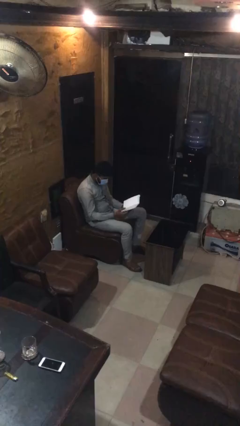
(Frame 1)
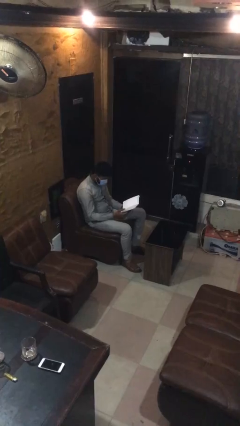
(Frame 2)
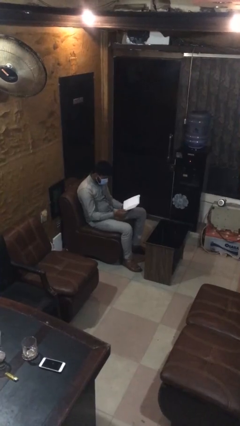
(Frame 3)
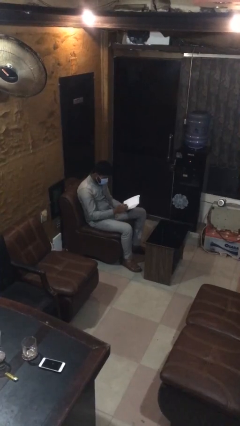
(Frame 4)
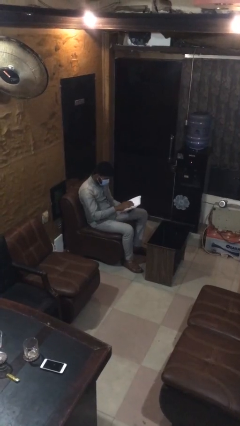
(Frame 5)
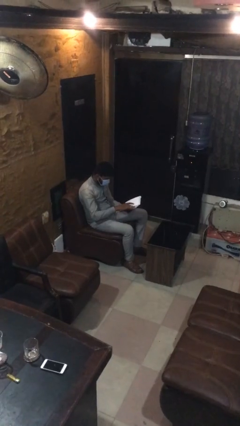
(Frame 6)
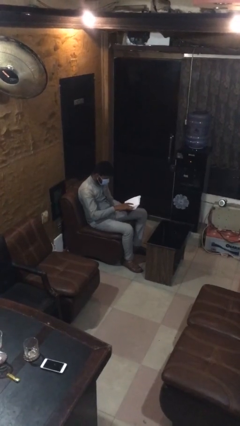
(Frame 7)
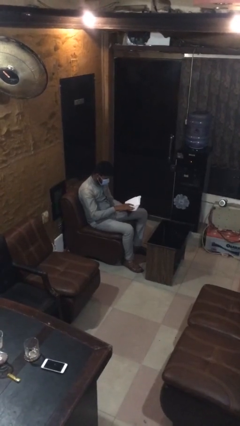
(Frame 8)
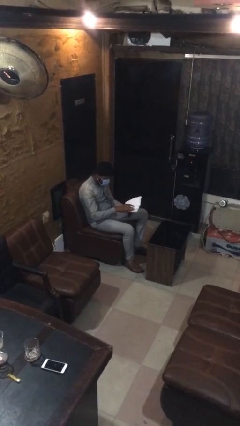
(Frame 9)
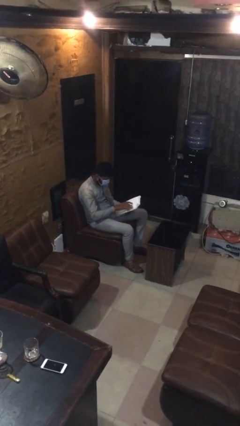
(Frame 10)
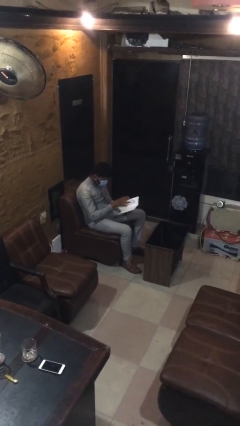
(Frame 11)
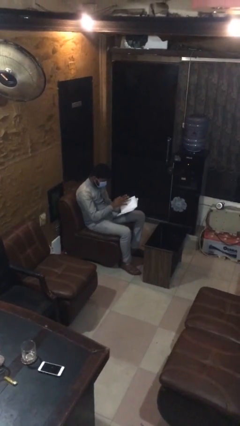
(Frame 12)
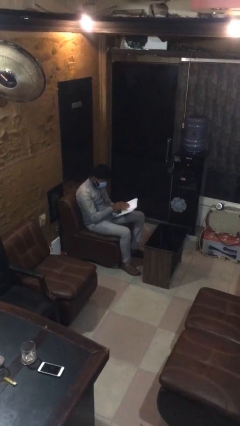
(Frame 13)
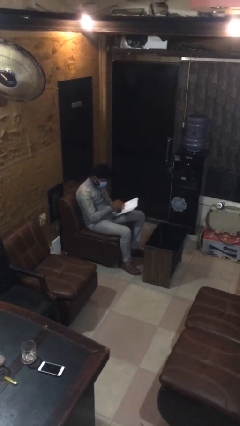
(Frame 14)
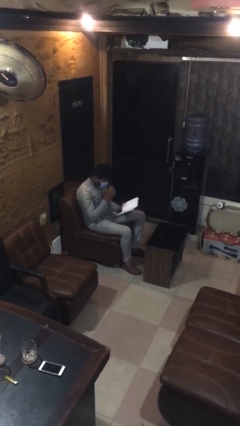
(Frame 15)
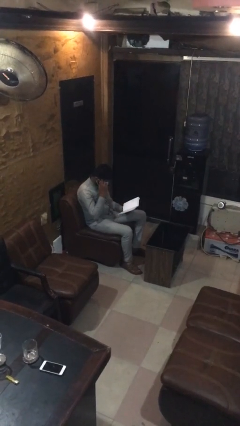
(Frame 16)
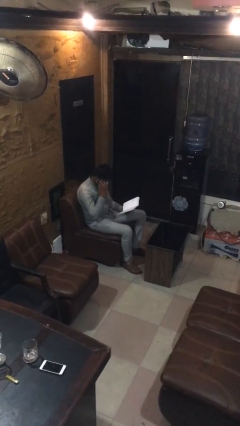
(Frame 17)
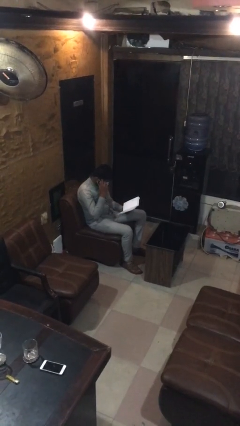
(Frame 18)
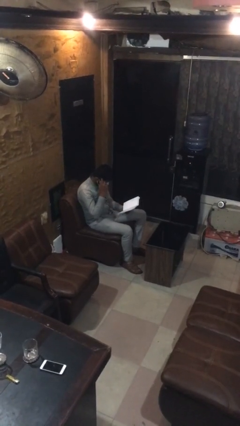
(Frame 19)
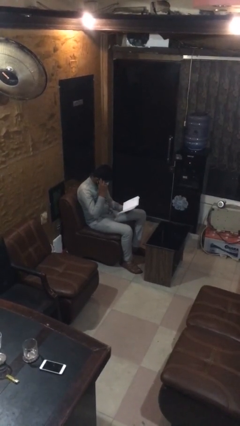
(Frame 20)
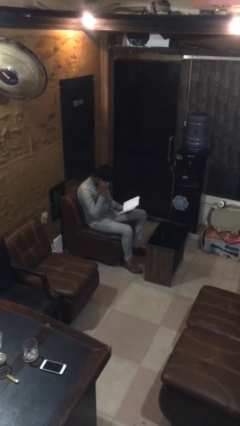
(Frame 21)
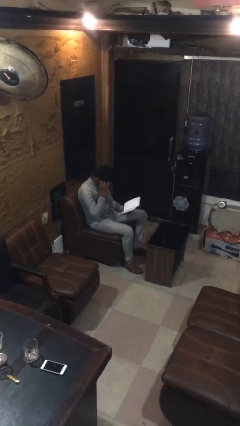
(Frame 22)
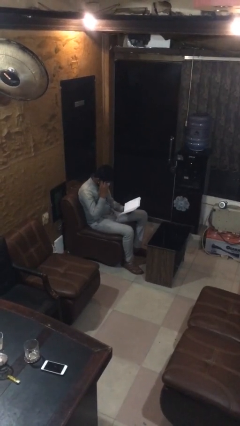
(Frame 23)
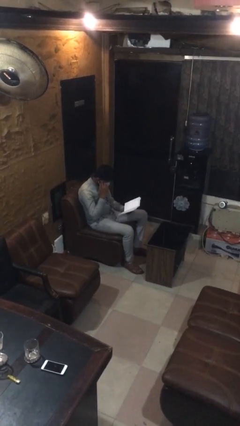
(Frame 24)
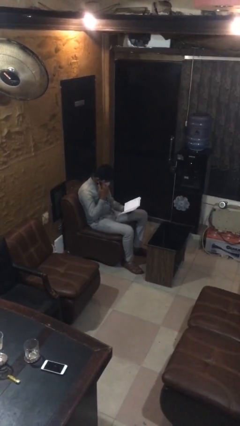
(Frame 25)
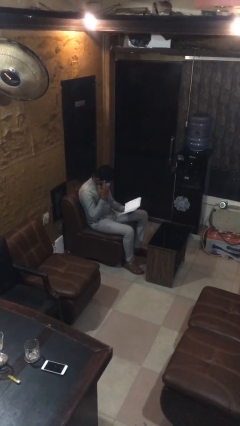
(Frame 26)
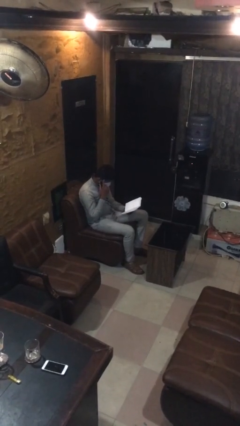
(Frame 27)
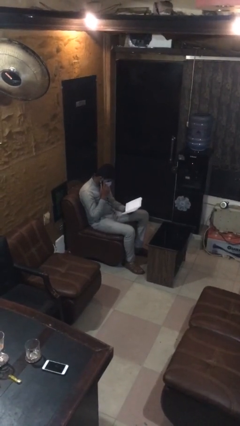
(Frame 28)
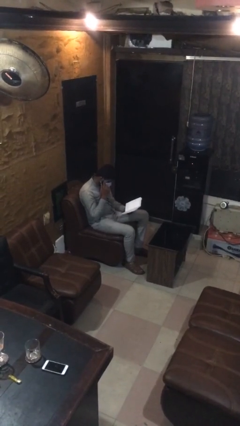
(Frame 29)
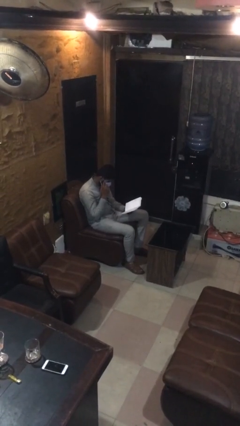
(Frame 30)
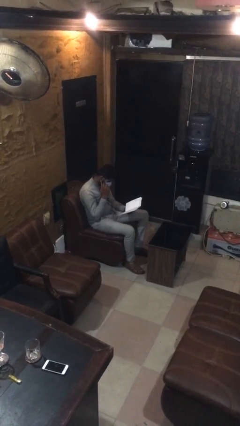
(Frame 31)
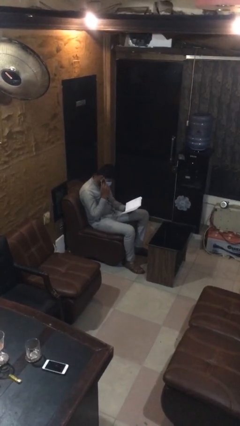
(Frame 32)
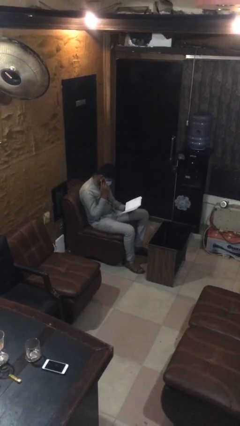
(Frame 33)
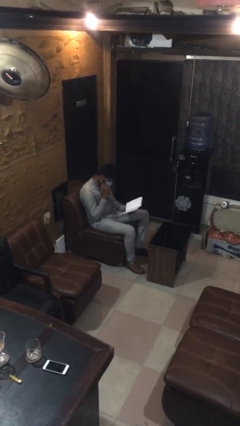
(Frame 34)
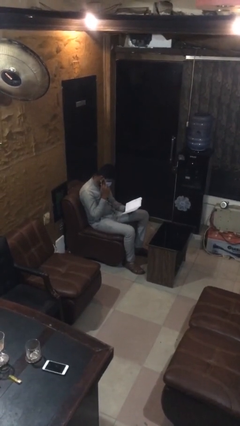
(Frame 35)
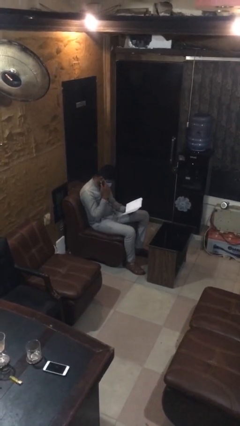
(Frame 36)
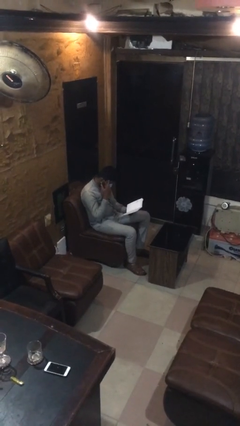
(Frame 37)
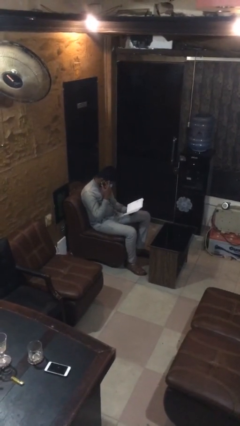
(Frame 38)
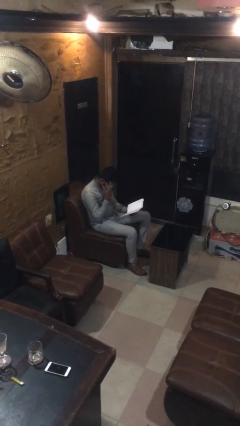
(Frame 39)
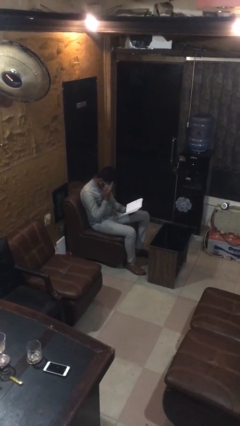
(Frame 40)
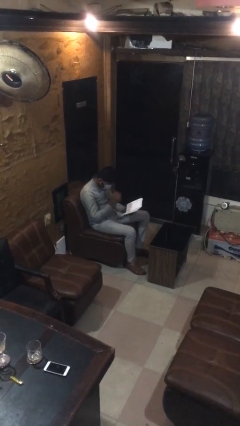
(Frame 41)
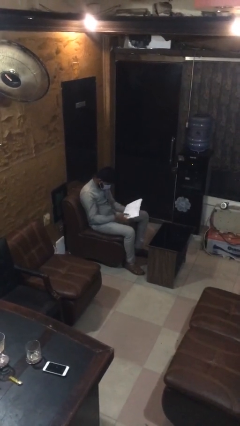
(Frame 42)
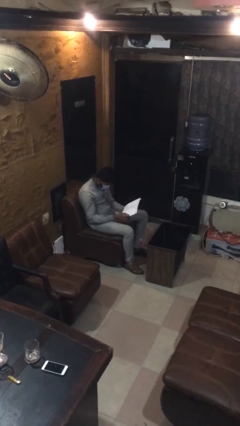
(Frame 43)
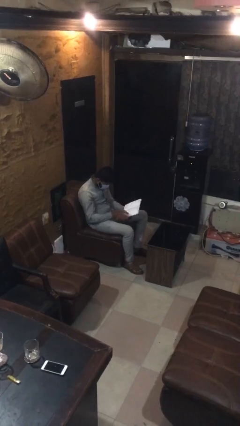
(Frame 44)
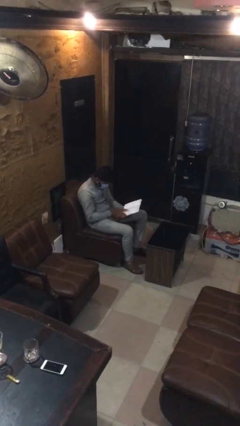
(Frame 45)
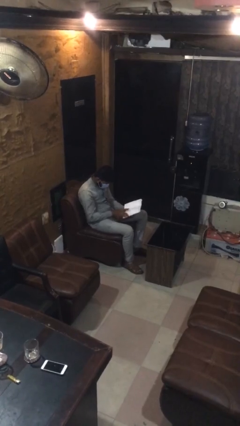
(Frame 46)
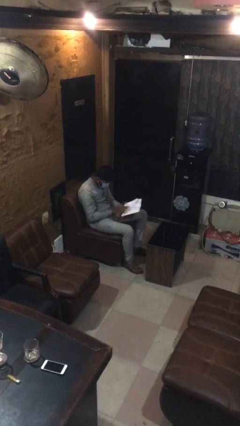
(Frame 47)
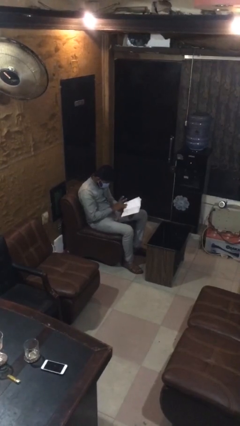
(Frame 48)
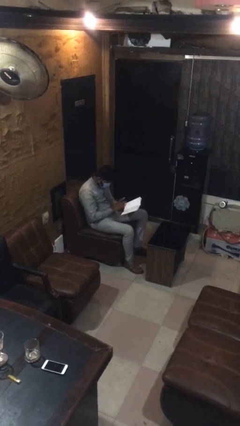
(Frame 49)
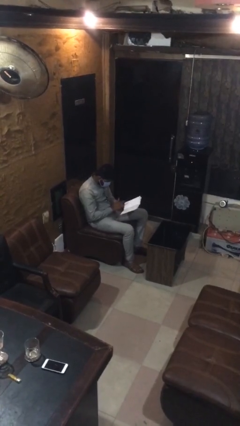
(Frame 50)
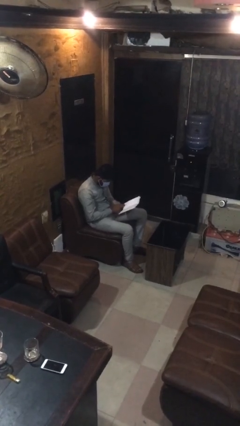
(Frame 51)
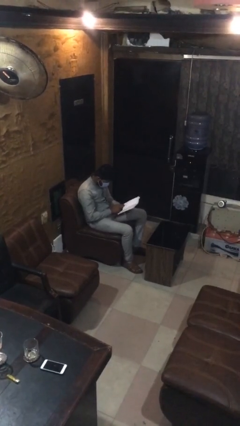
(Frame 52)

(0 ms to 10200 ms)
person reads document

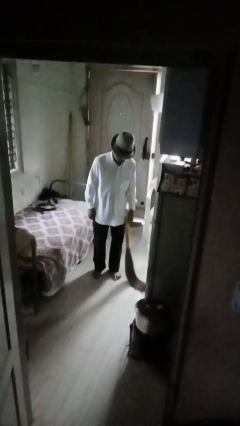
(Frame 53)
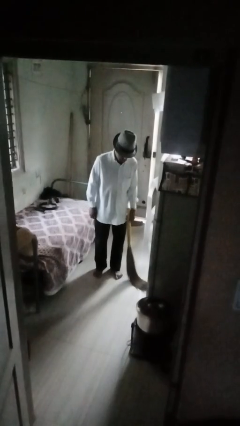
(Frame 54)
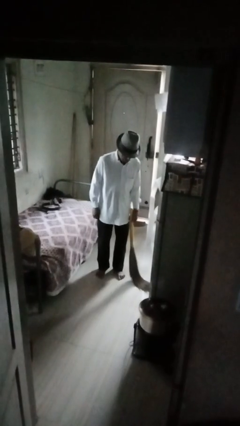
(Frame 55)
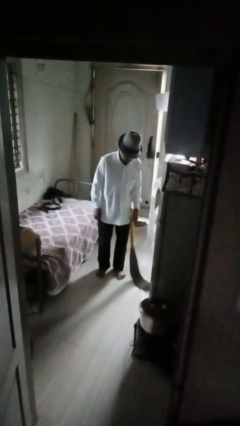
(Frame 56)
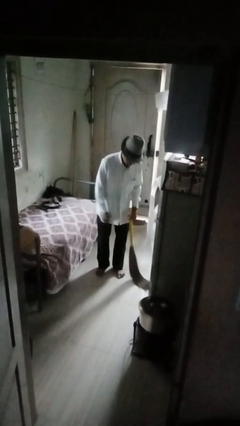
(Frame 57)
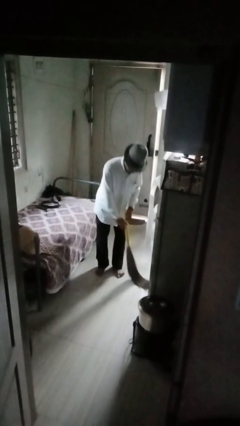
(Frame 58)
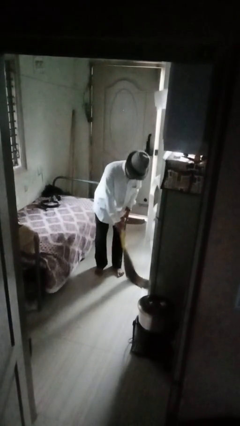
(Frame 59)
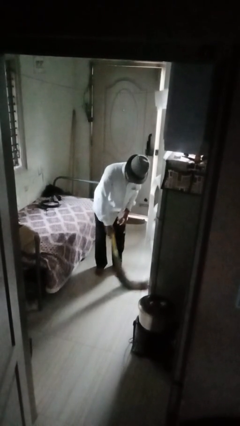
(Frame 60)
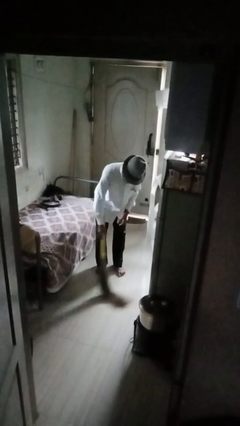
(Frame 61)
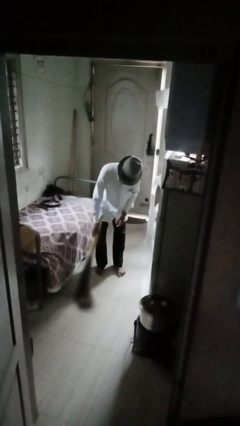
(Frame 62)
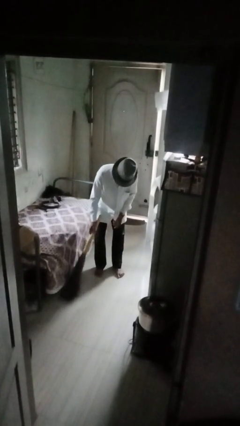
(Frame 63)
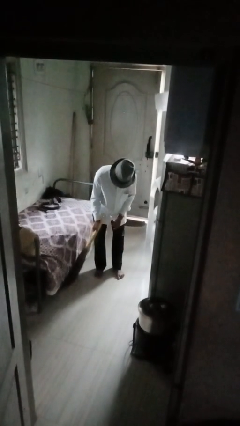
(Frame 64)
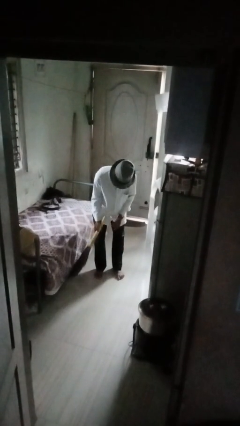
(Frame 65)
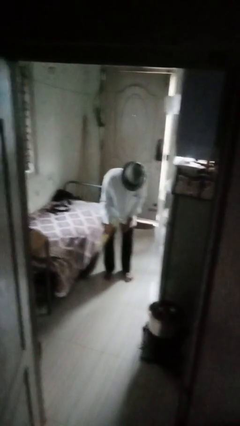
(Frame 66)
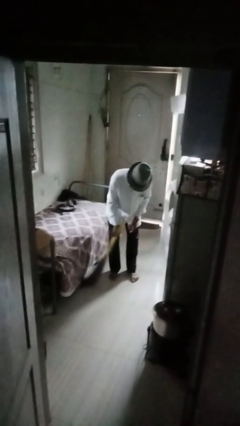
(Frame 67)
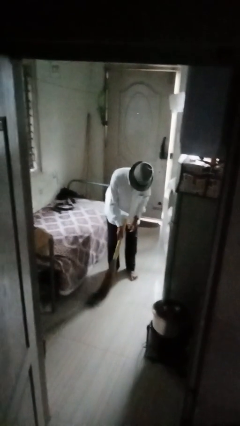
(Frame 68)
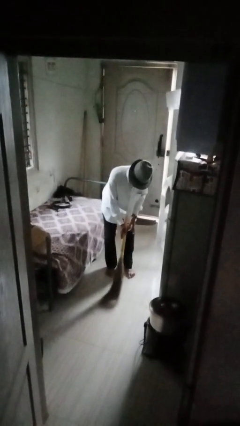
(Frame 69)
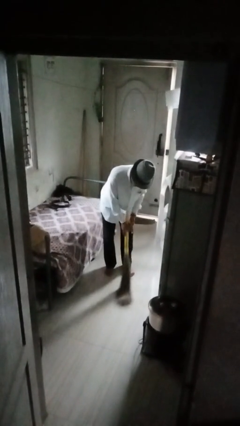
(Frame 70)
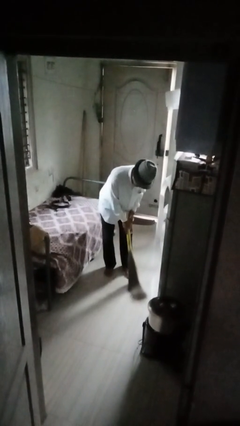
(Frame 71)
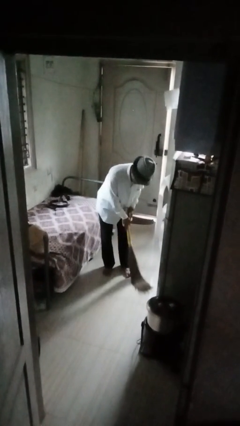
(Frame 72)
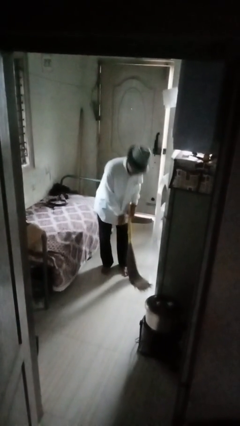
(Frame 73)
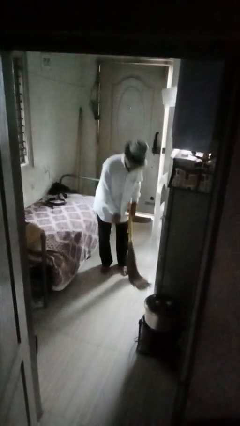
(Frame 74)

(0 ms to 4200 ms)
person sweeps floor

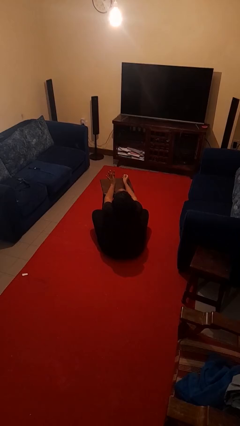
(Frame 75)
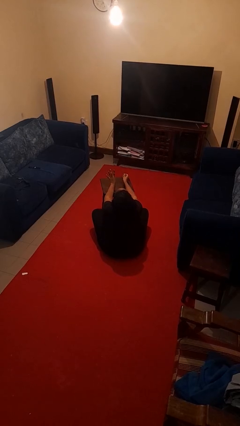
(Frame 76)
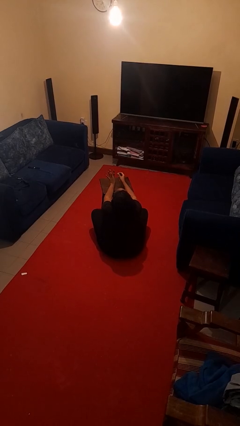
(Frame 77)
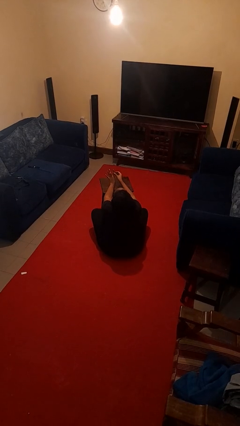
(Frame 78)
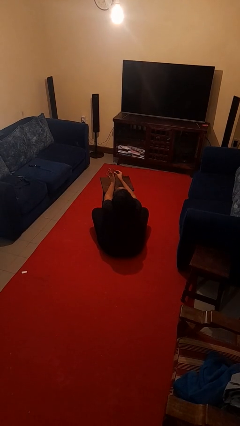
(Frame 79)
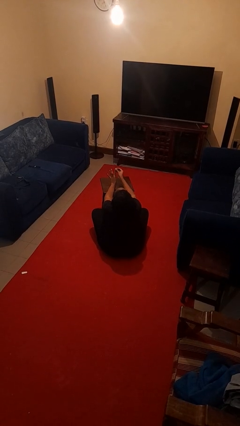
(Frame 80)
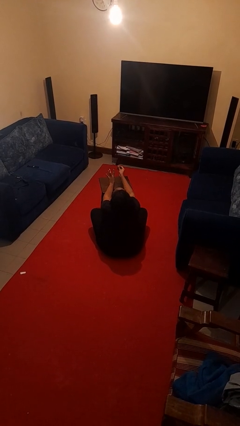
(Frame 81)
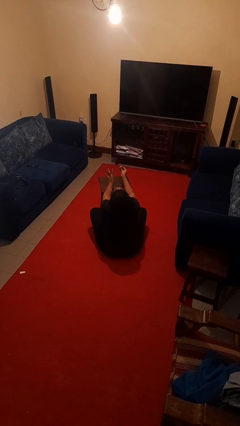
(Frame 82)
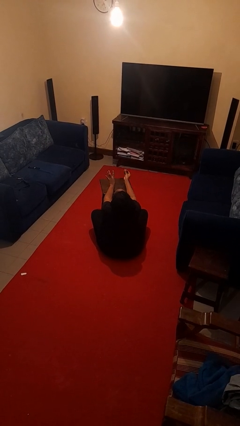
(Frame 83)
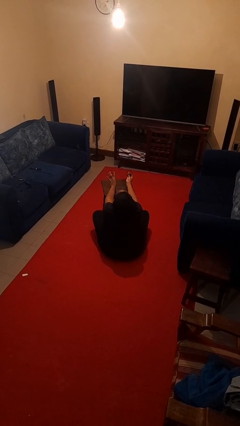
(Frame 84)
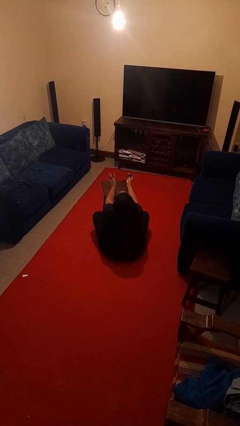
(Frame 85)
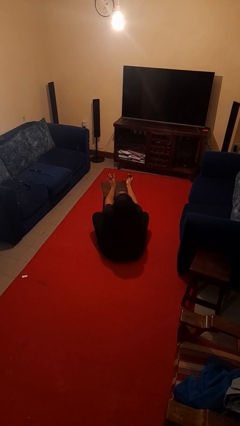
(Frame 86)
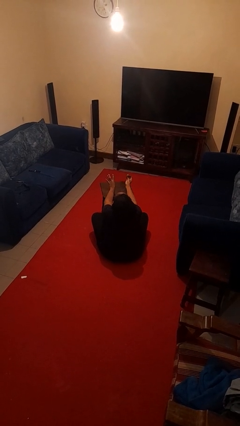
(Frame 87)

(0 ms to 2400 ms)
person takes off ring

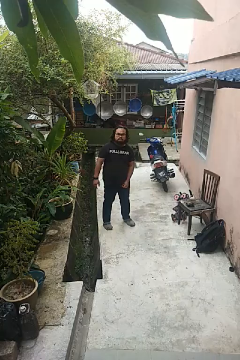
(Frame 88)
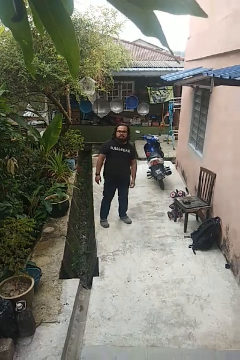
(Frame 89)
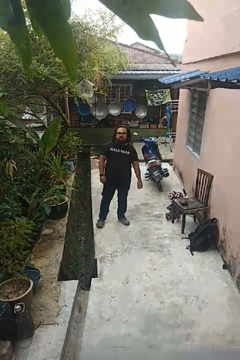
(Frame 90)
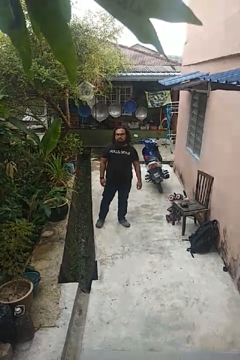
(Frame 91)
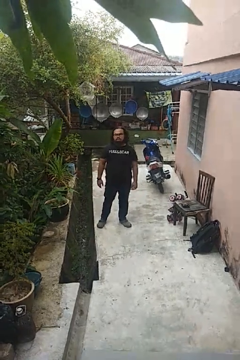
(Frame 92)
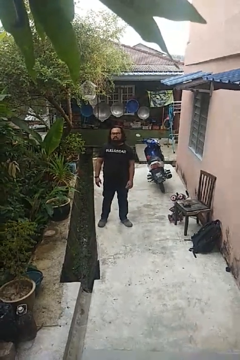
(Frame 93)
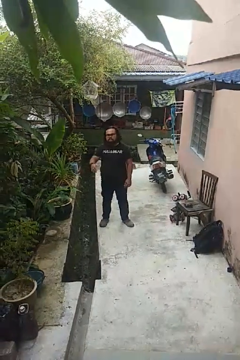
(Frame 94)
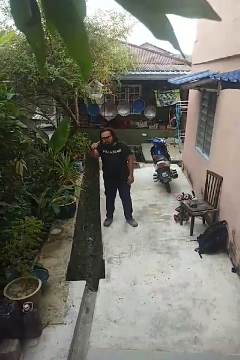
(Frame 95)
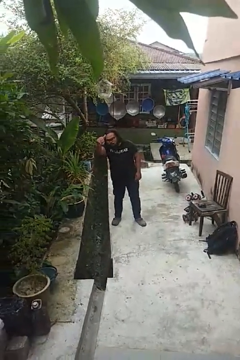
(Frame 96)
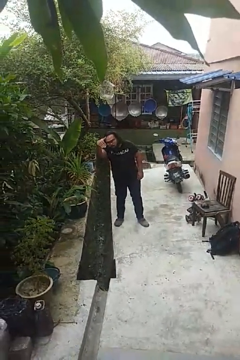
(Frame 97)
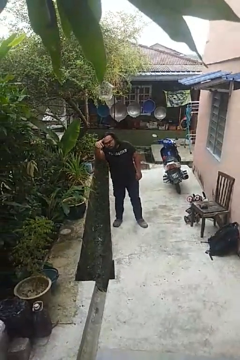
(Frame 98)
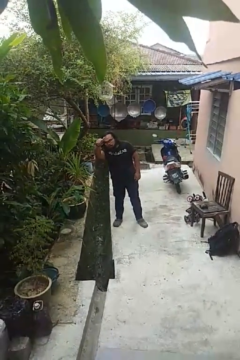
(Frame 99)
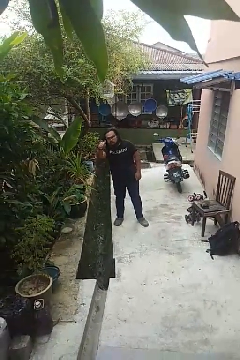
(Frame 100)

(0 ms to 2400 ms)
person gestures come here
